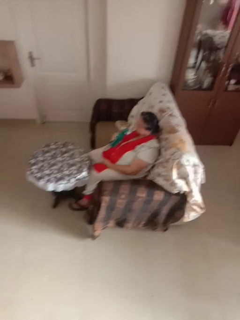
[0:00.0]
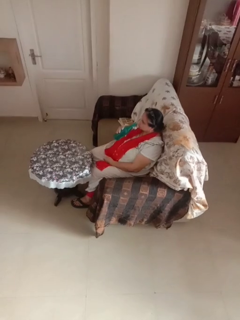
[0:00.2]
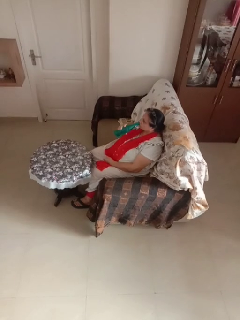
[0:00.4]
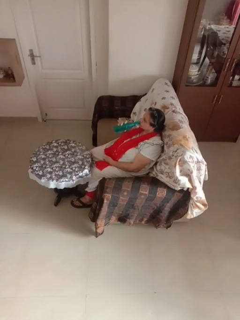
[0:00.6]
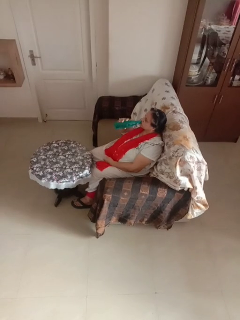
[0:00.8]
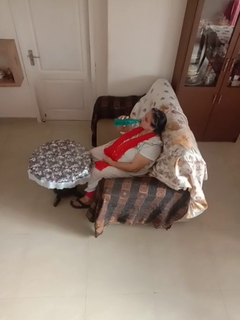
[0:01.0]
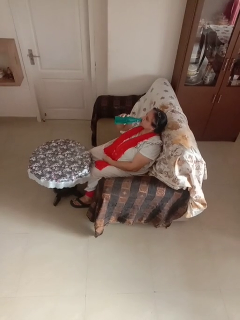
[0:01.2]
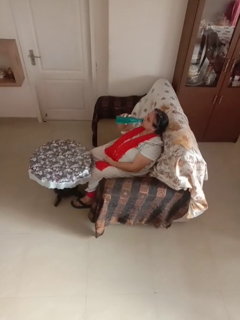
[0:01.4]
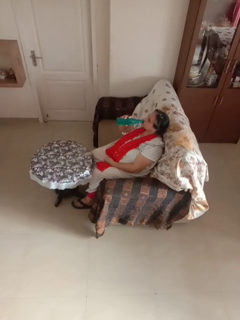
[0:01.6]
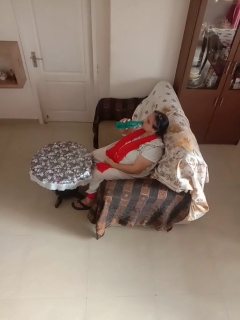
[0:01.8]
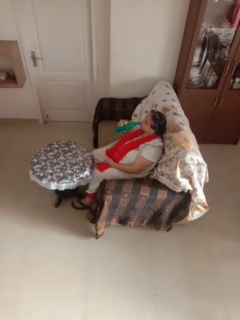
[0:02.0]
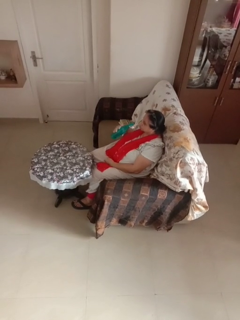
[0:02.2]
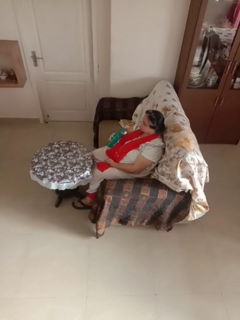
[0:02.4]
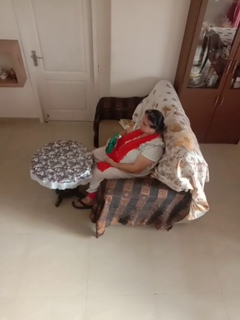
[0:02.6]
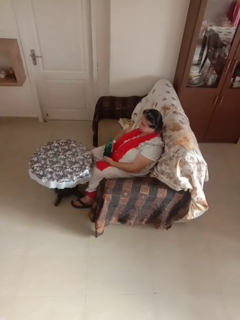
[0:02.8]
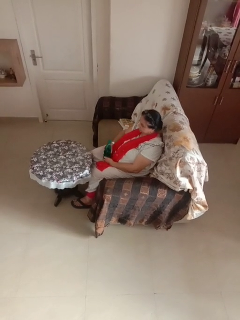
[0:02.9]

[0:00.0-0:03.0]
person drinks from bottle

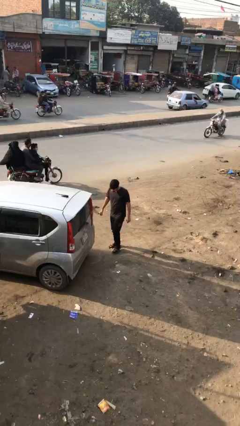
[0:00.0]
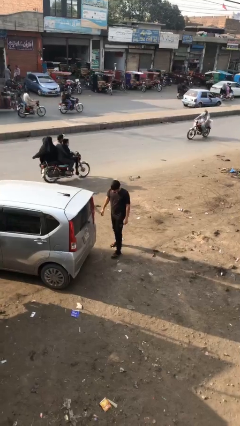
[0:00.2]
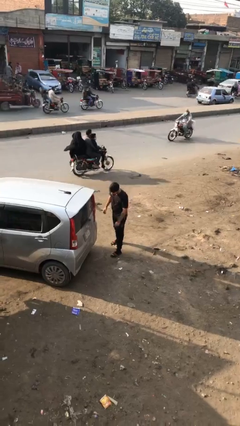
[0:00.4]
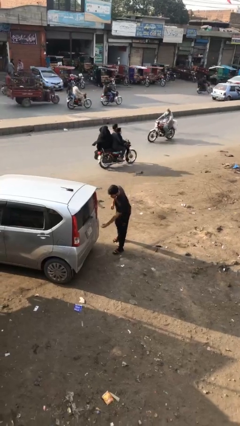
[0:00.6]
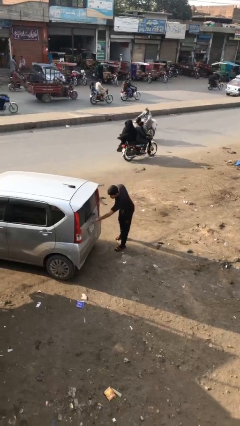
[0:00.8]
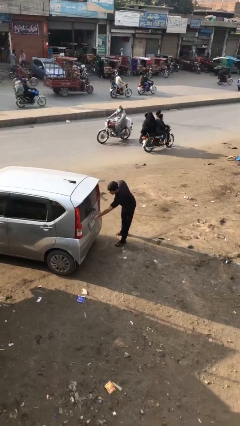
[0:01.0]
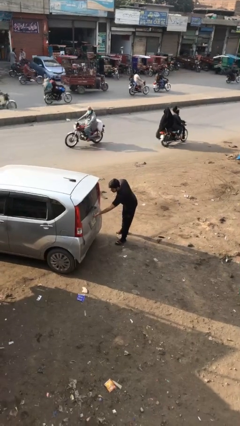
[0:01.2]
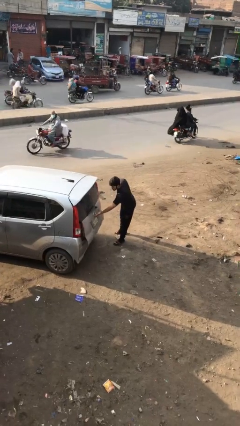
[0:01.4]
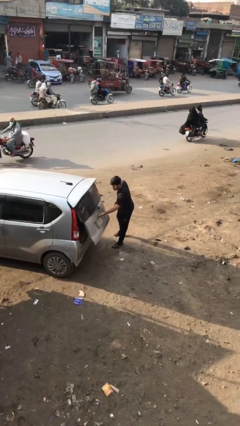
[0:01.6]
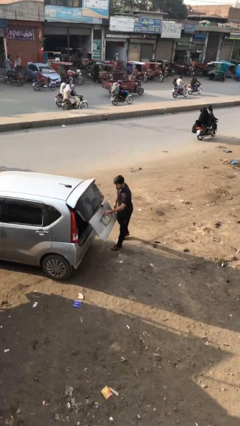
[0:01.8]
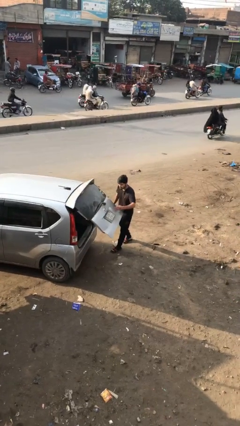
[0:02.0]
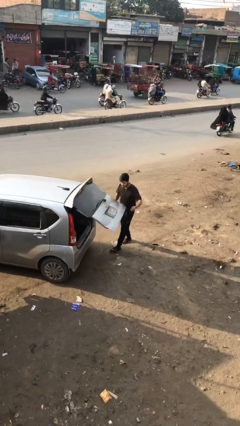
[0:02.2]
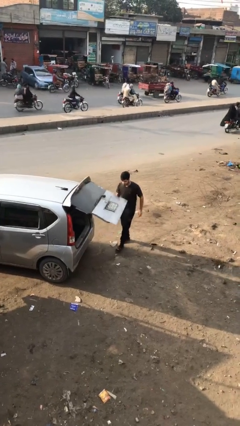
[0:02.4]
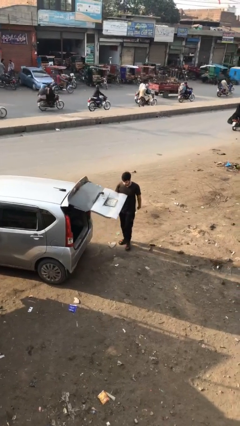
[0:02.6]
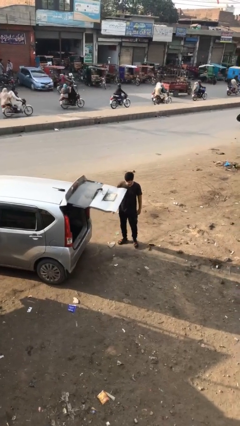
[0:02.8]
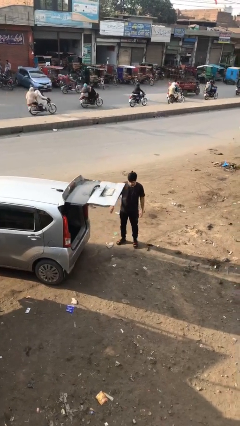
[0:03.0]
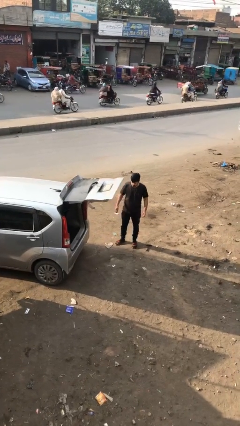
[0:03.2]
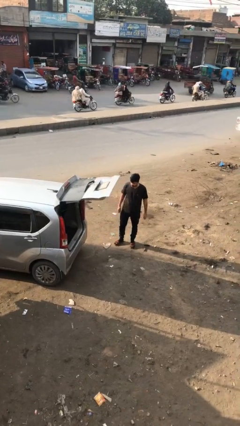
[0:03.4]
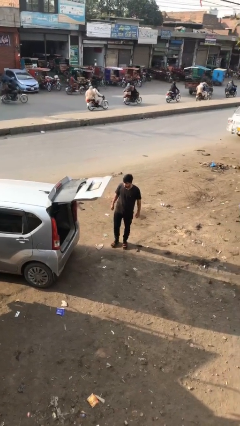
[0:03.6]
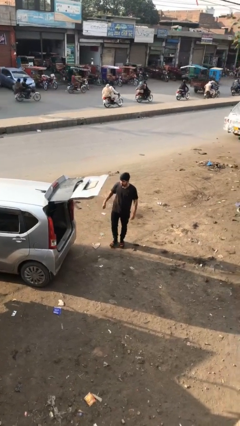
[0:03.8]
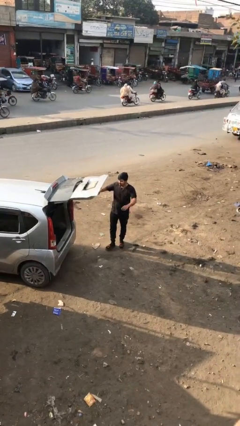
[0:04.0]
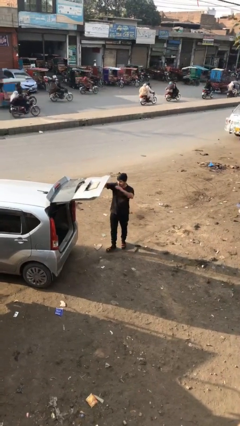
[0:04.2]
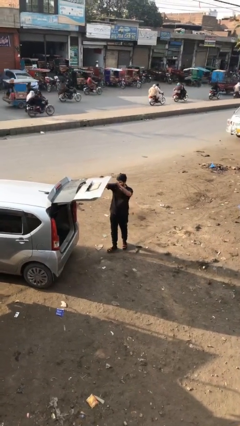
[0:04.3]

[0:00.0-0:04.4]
person opens car trunk

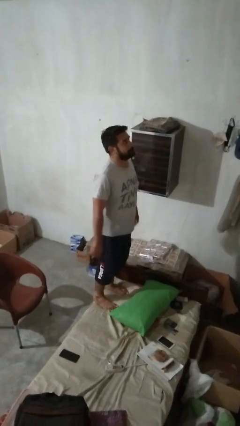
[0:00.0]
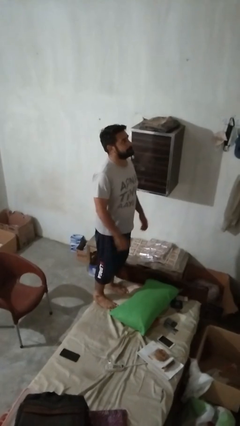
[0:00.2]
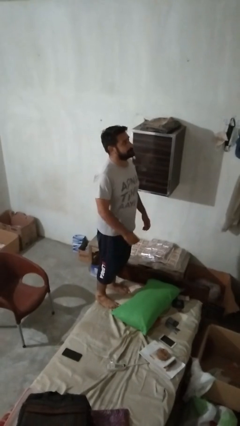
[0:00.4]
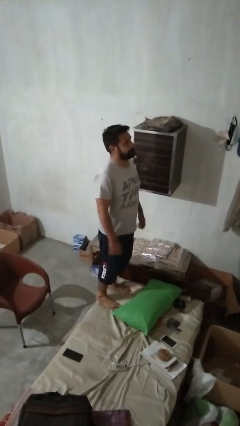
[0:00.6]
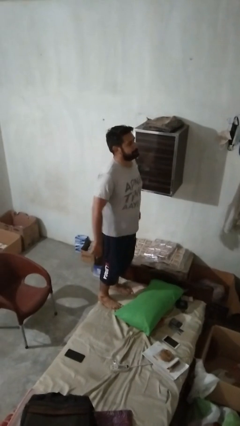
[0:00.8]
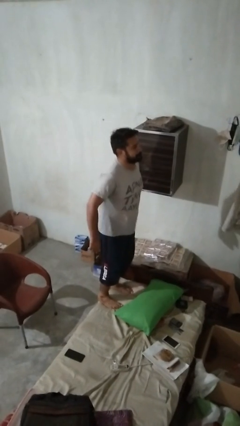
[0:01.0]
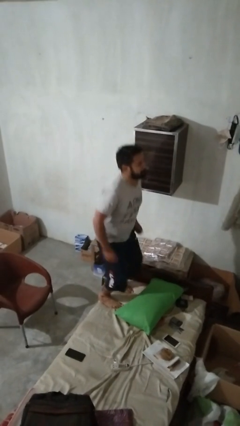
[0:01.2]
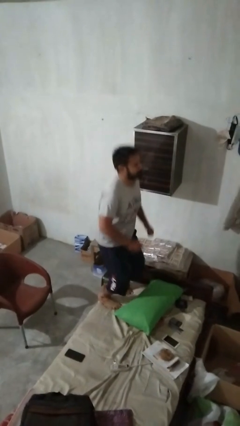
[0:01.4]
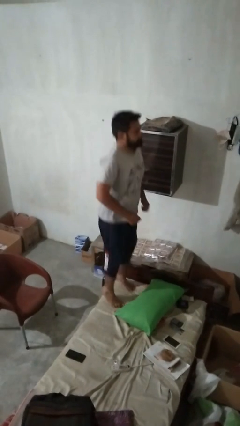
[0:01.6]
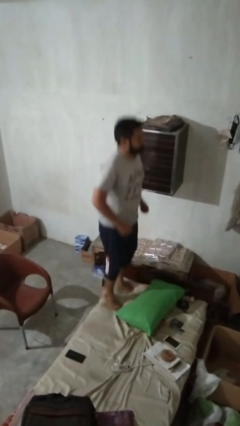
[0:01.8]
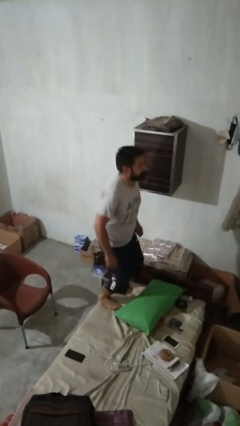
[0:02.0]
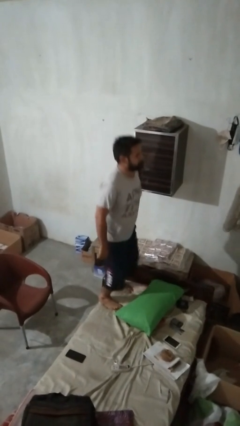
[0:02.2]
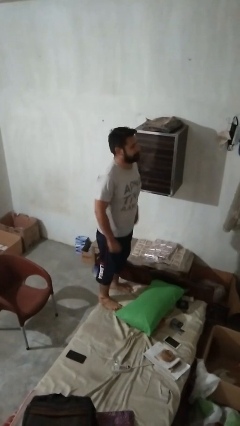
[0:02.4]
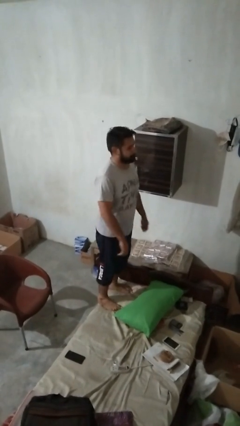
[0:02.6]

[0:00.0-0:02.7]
person jumps on couch

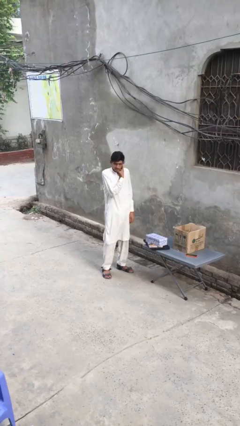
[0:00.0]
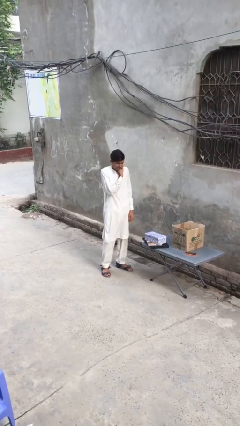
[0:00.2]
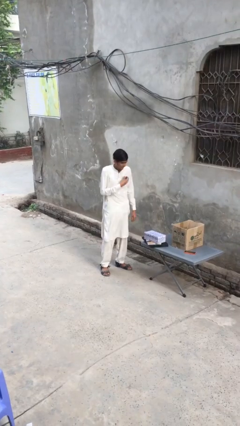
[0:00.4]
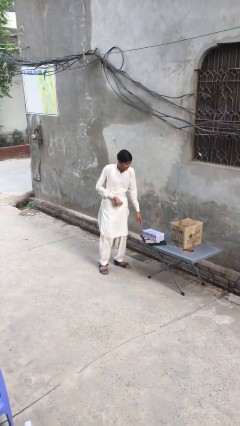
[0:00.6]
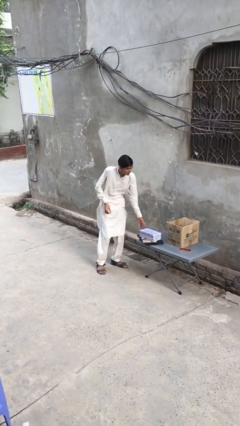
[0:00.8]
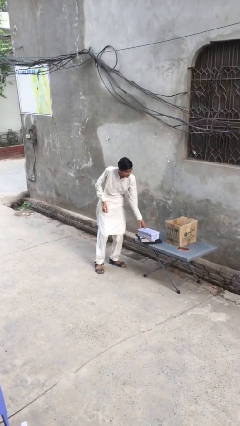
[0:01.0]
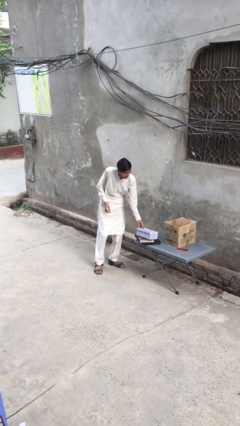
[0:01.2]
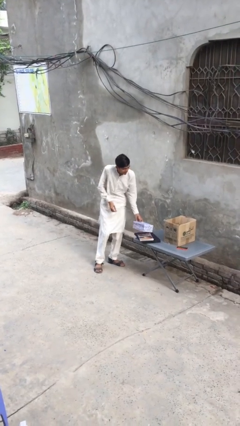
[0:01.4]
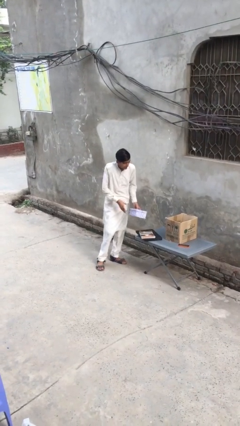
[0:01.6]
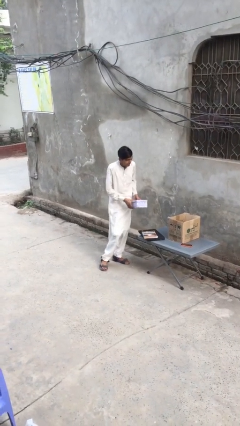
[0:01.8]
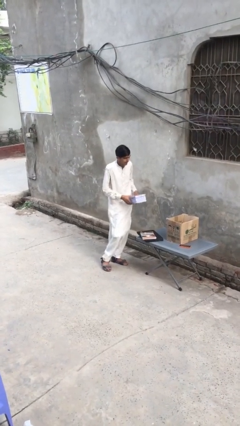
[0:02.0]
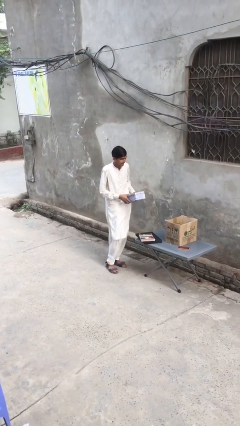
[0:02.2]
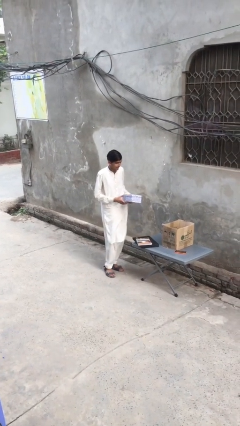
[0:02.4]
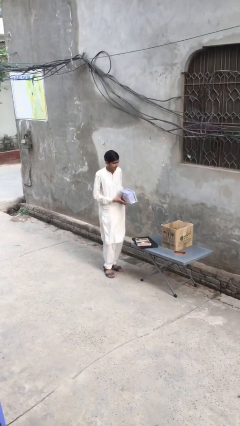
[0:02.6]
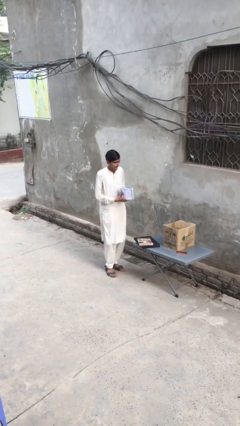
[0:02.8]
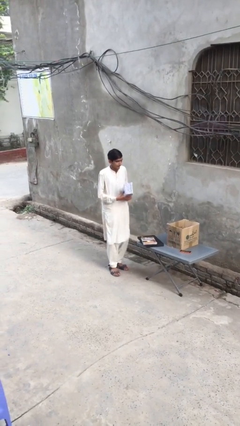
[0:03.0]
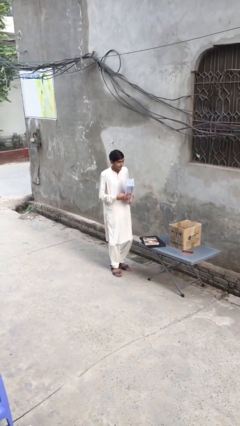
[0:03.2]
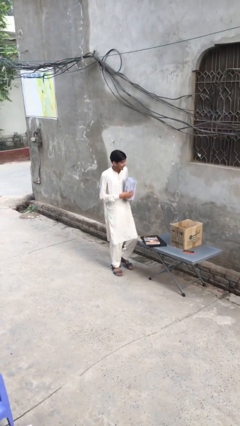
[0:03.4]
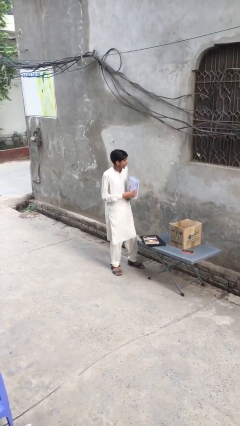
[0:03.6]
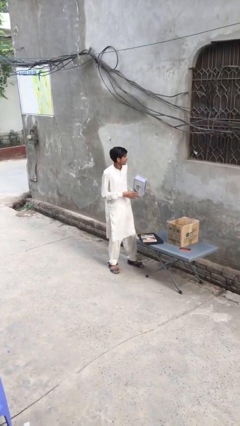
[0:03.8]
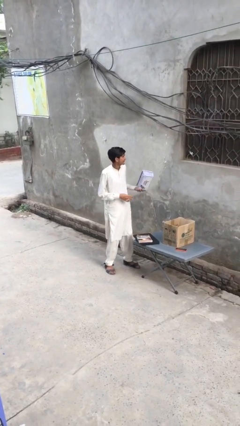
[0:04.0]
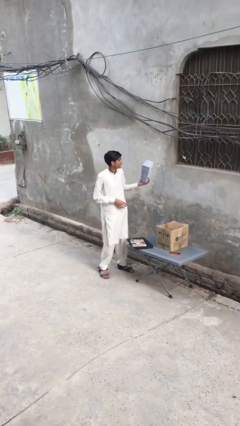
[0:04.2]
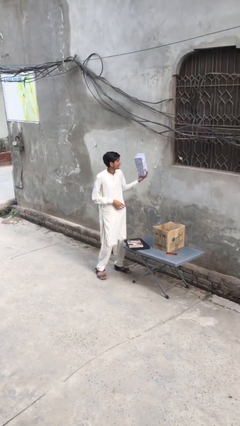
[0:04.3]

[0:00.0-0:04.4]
person picks up object from table

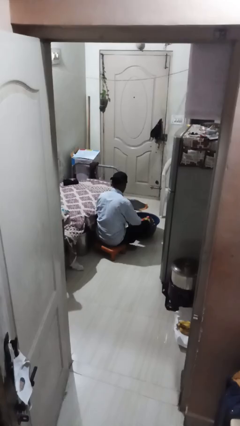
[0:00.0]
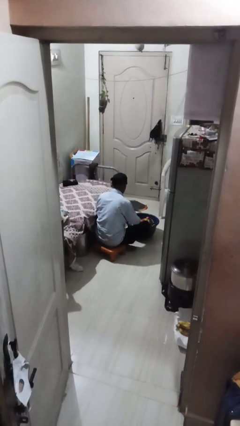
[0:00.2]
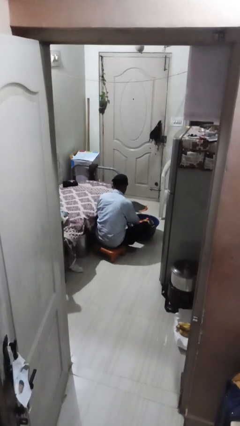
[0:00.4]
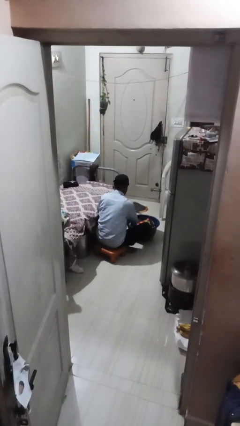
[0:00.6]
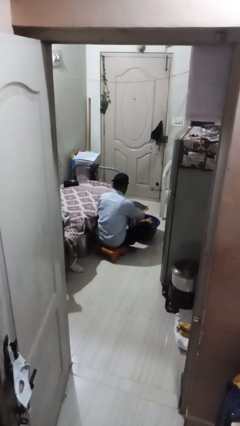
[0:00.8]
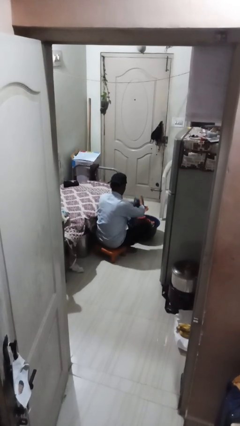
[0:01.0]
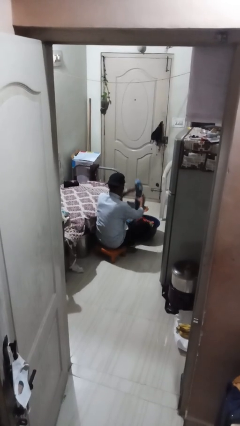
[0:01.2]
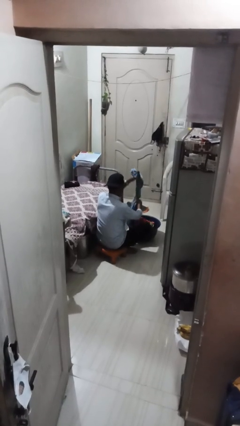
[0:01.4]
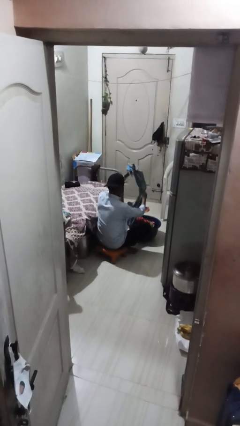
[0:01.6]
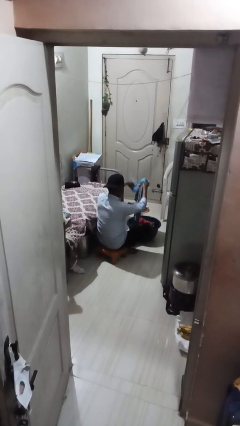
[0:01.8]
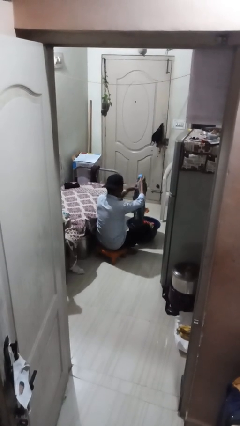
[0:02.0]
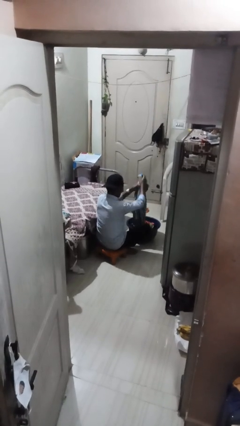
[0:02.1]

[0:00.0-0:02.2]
person takes object from basket

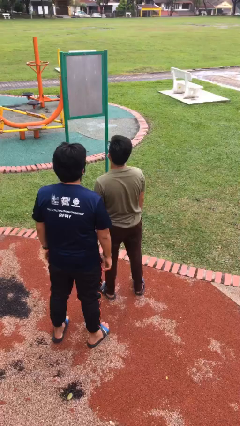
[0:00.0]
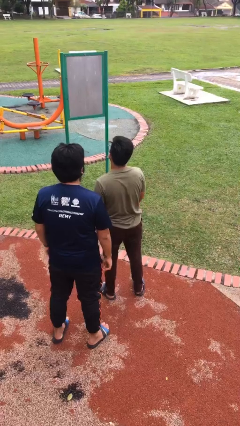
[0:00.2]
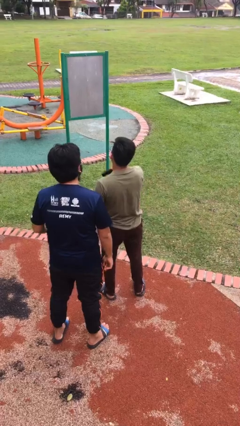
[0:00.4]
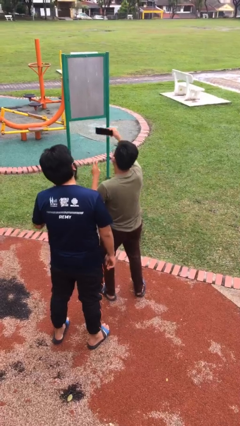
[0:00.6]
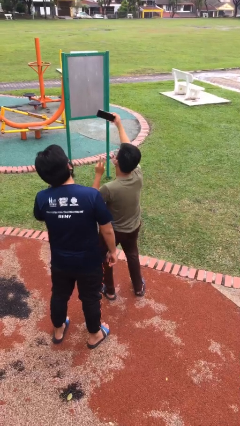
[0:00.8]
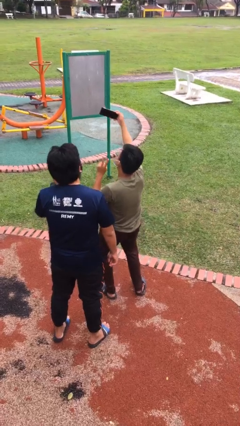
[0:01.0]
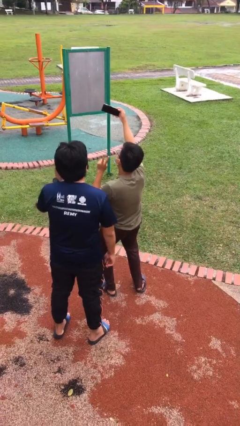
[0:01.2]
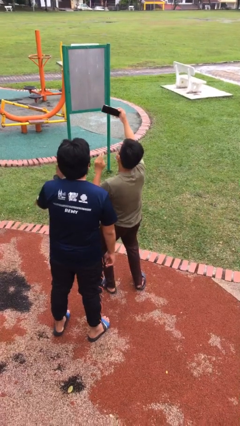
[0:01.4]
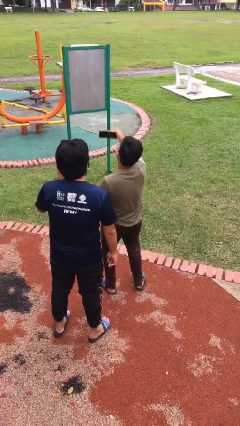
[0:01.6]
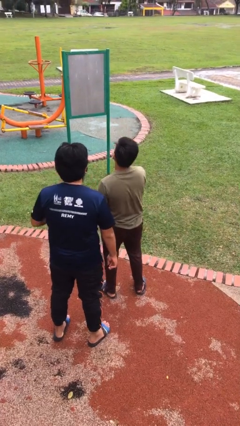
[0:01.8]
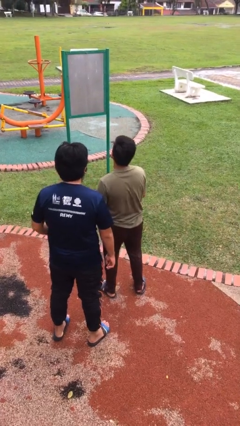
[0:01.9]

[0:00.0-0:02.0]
person takes selfie with person
